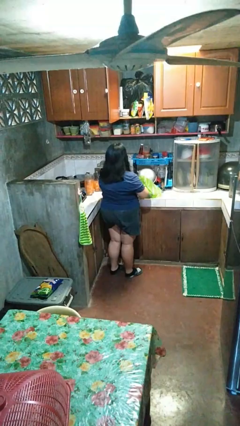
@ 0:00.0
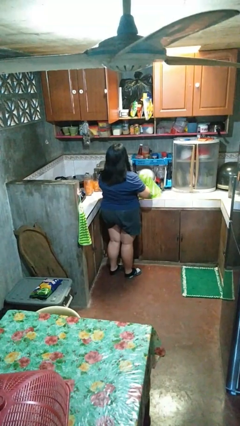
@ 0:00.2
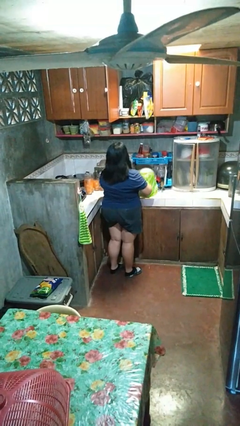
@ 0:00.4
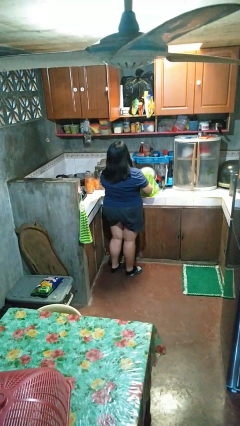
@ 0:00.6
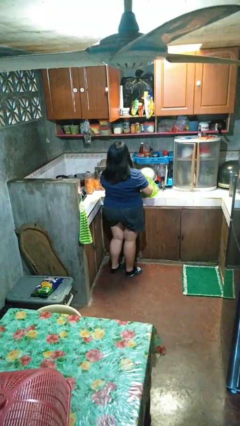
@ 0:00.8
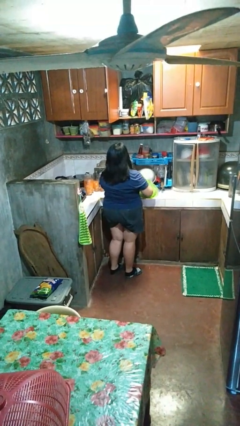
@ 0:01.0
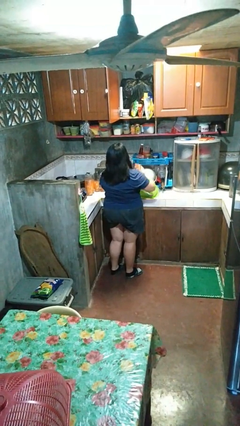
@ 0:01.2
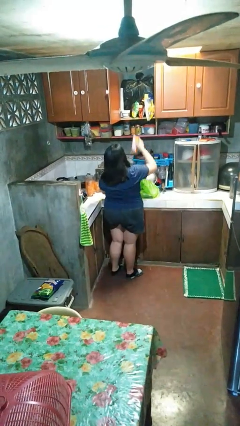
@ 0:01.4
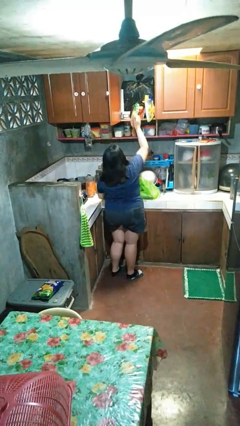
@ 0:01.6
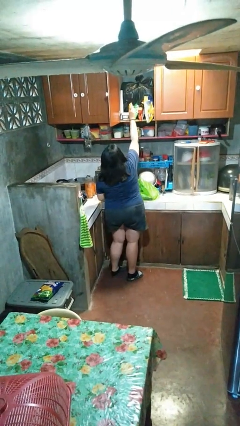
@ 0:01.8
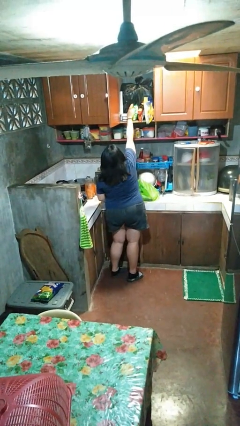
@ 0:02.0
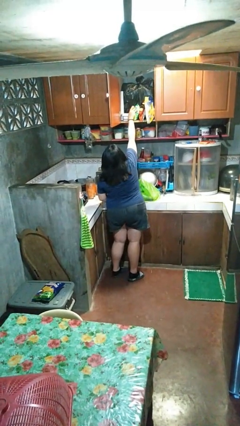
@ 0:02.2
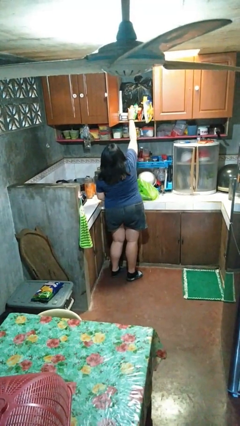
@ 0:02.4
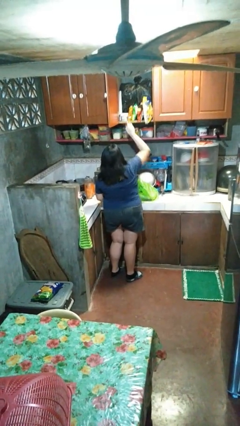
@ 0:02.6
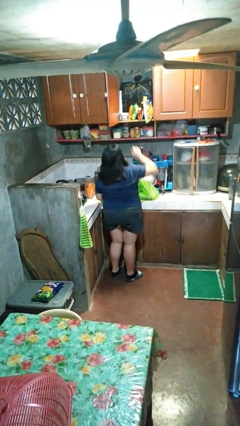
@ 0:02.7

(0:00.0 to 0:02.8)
person loads groceries into cabinet

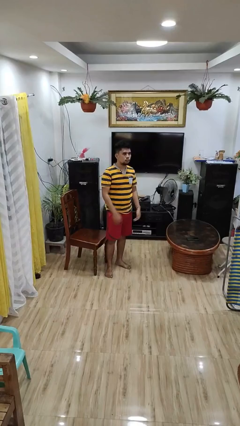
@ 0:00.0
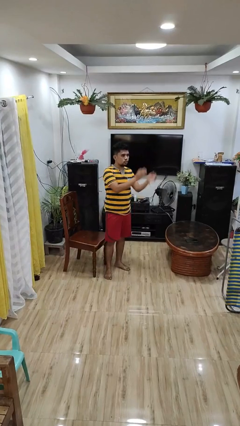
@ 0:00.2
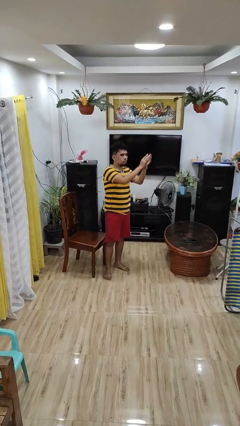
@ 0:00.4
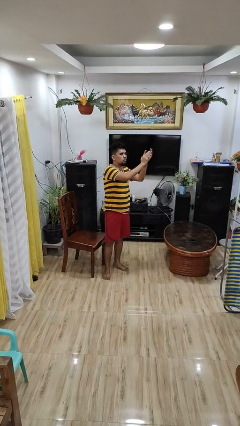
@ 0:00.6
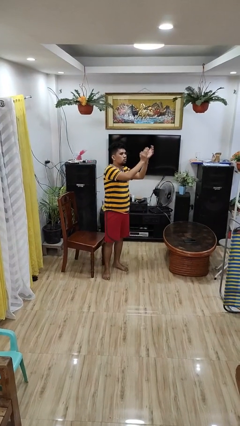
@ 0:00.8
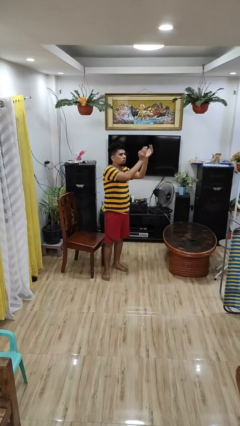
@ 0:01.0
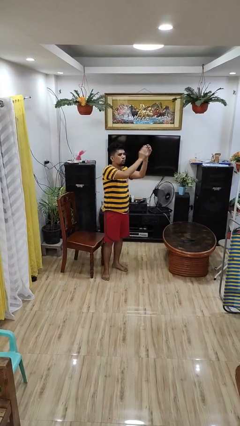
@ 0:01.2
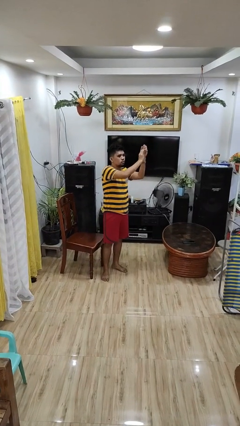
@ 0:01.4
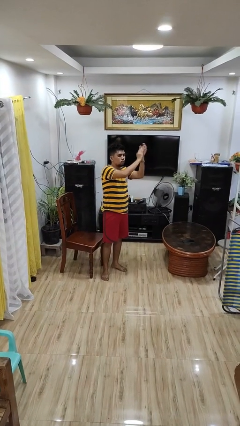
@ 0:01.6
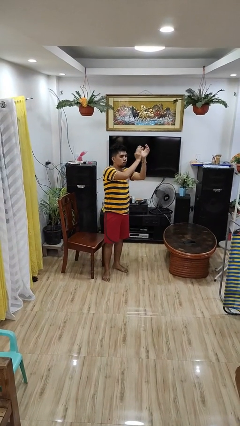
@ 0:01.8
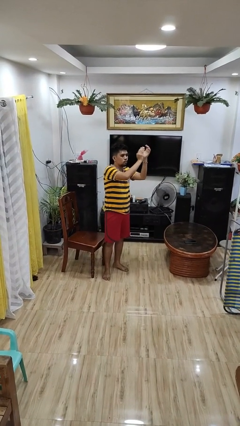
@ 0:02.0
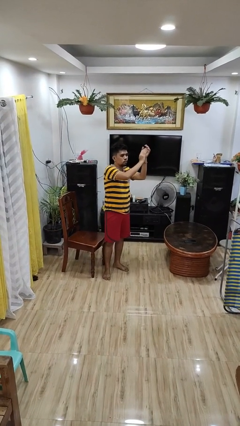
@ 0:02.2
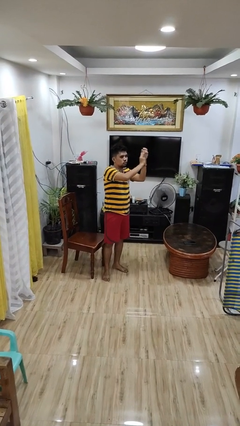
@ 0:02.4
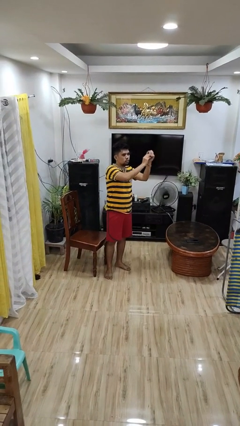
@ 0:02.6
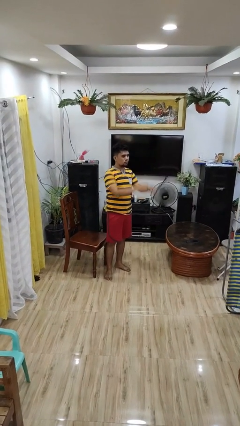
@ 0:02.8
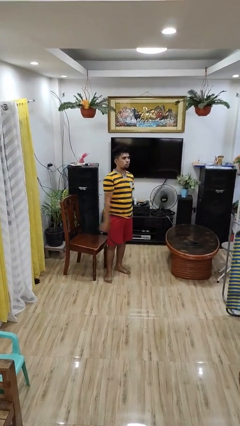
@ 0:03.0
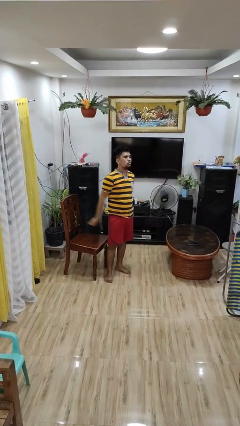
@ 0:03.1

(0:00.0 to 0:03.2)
person claps hands

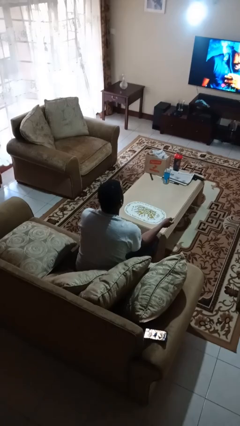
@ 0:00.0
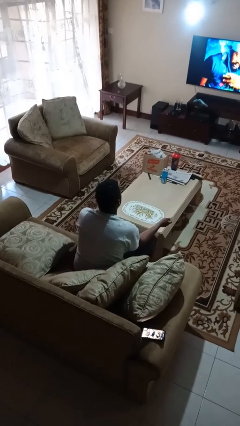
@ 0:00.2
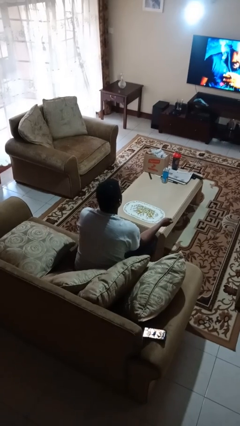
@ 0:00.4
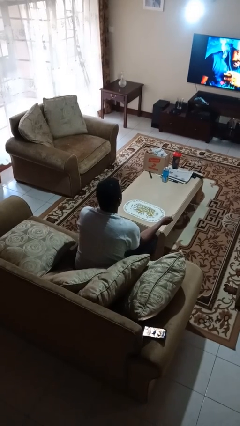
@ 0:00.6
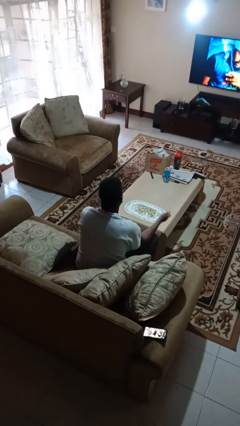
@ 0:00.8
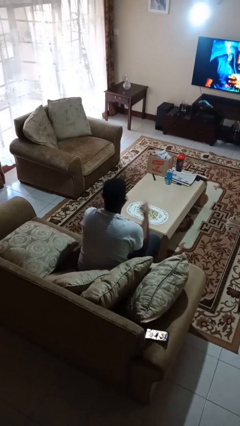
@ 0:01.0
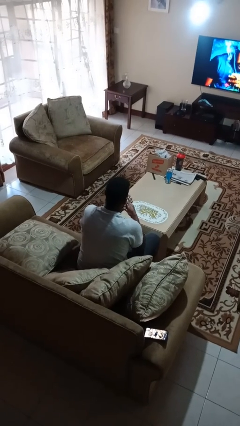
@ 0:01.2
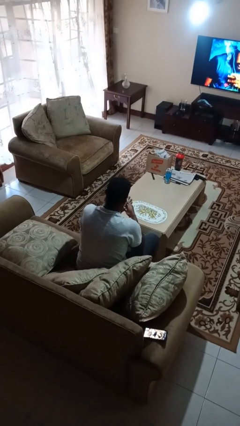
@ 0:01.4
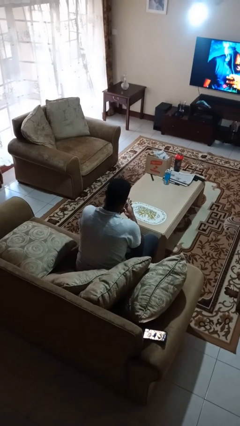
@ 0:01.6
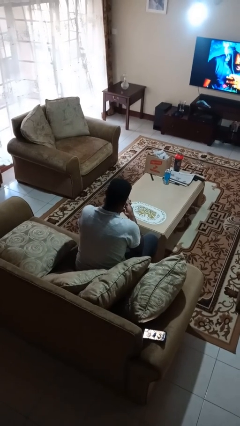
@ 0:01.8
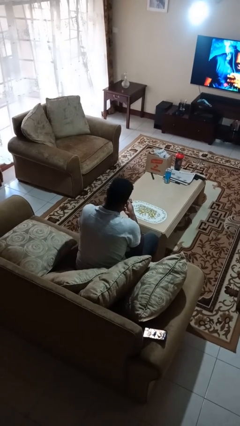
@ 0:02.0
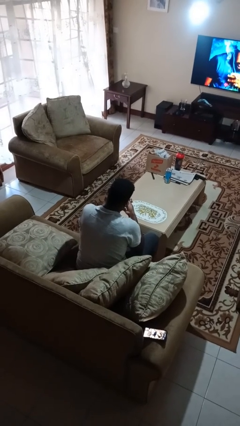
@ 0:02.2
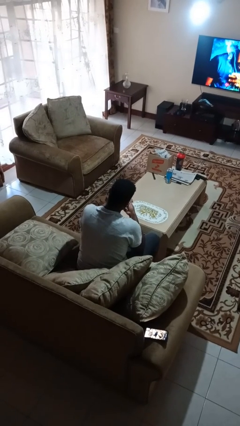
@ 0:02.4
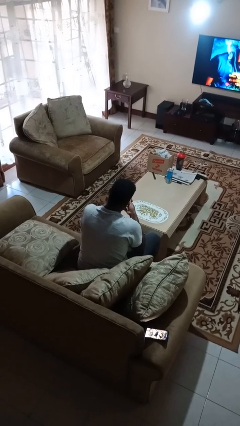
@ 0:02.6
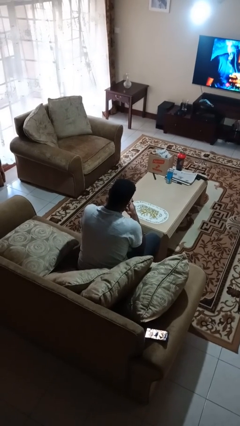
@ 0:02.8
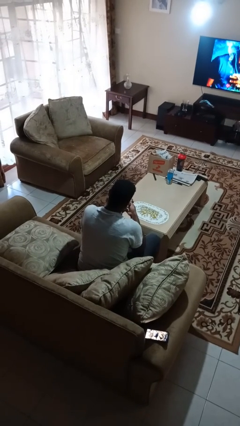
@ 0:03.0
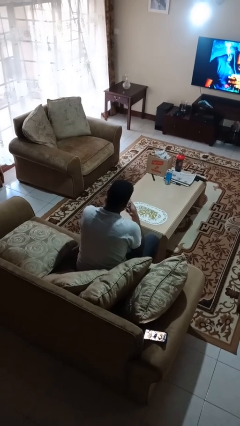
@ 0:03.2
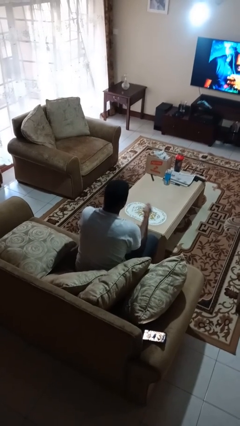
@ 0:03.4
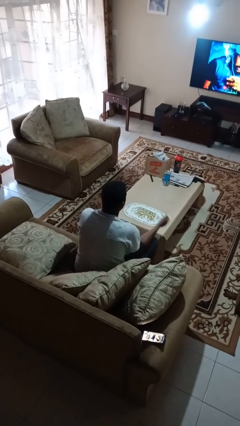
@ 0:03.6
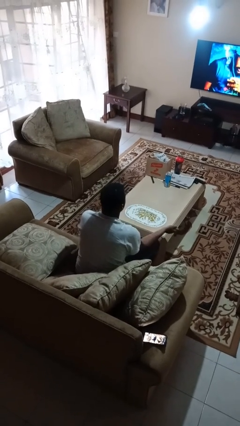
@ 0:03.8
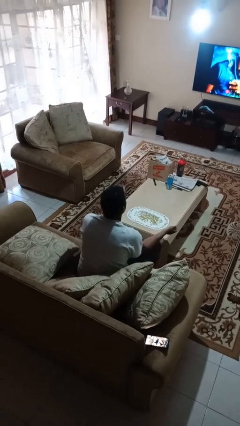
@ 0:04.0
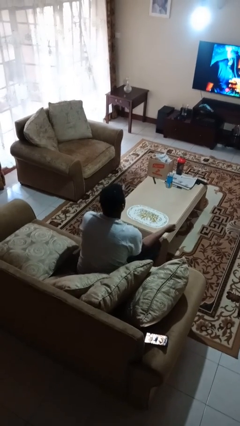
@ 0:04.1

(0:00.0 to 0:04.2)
person clips fingernails

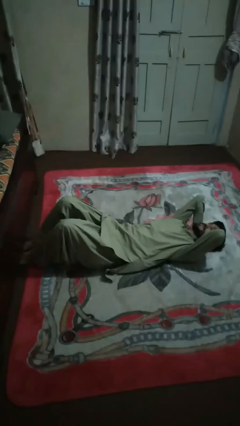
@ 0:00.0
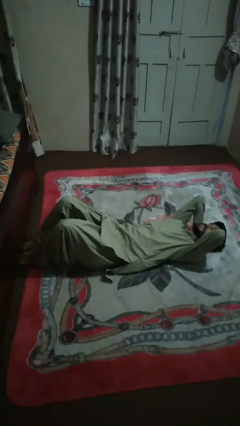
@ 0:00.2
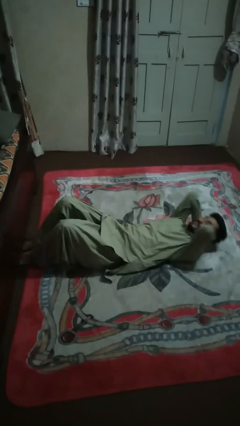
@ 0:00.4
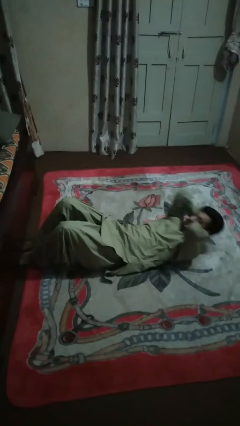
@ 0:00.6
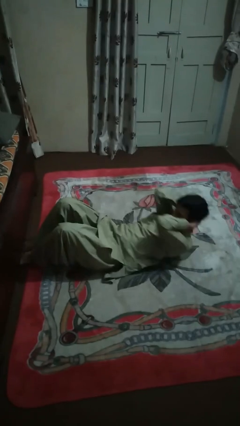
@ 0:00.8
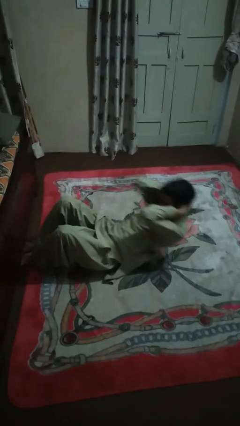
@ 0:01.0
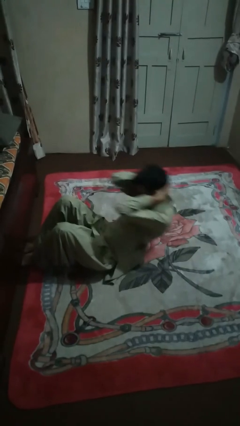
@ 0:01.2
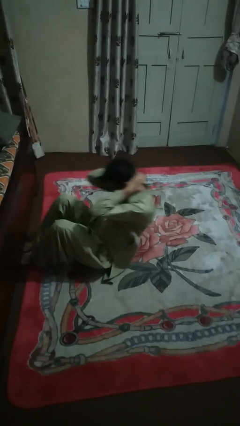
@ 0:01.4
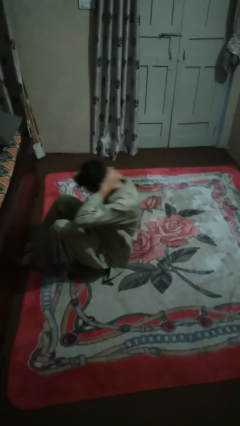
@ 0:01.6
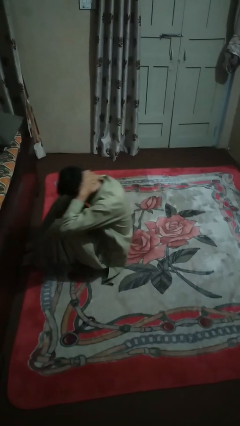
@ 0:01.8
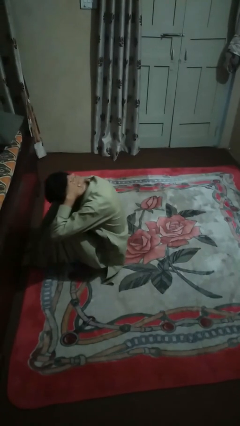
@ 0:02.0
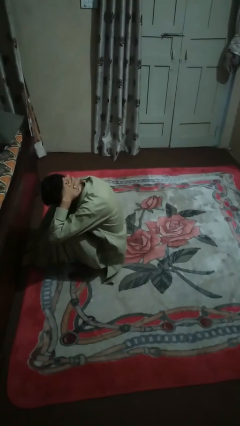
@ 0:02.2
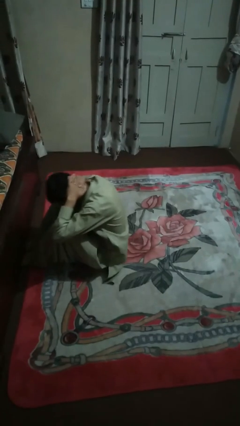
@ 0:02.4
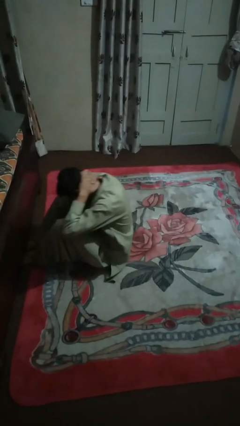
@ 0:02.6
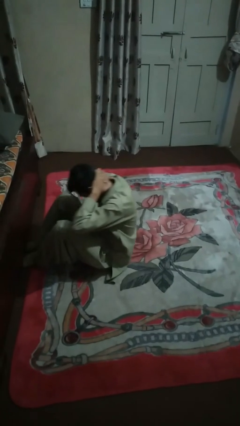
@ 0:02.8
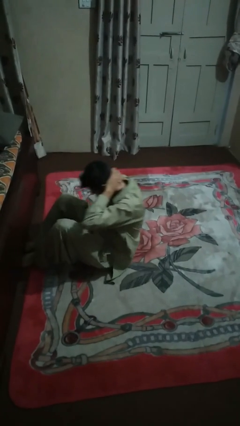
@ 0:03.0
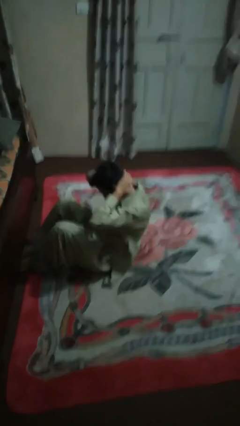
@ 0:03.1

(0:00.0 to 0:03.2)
person exercises with situp

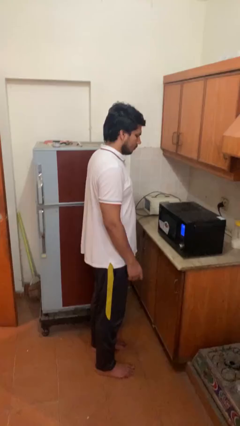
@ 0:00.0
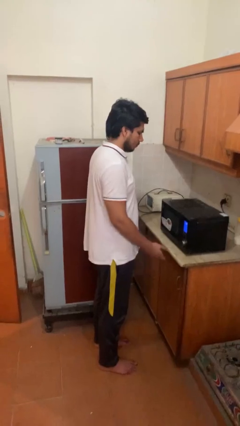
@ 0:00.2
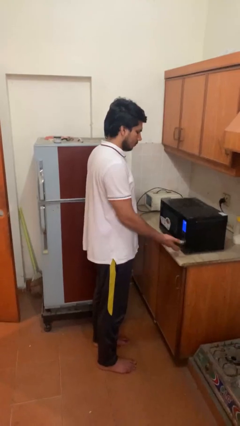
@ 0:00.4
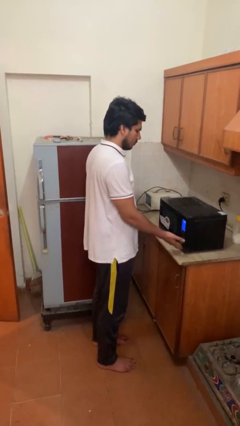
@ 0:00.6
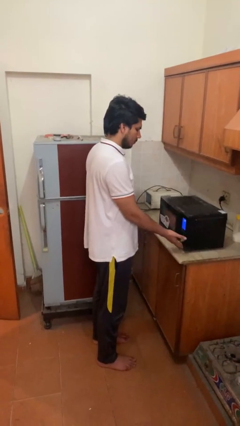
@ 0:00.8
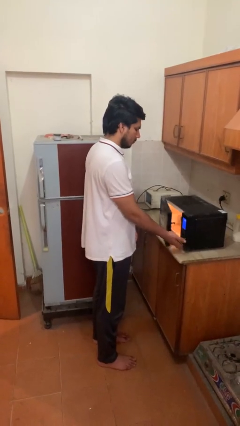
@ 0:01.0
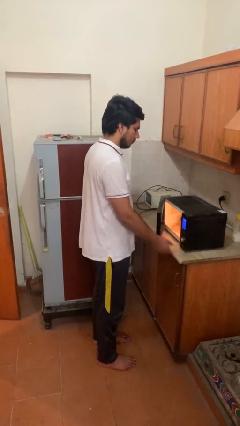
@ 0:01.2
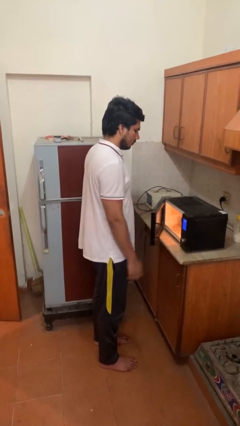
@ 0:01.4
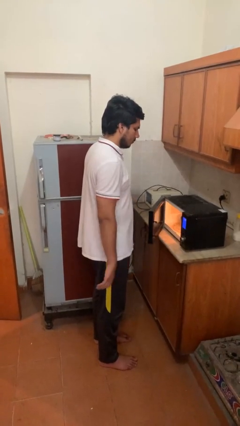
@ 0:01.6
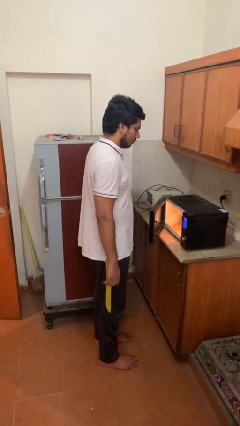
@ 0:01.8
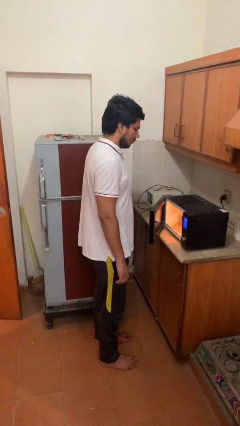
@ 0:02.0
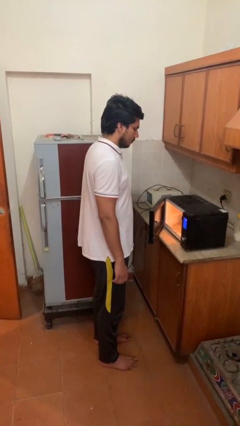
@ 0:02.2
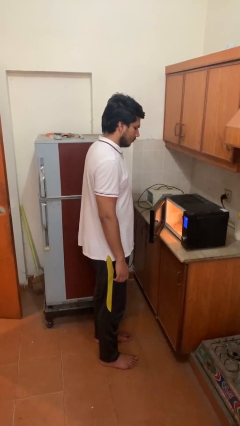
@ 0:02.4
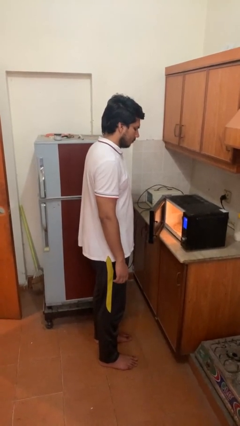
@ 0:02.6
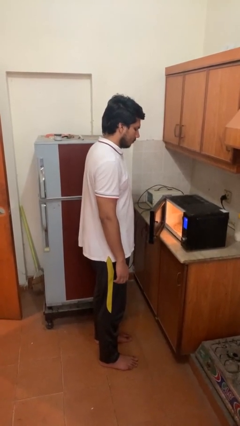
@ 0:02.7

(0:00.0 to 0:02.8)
person opens microwave

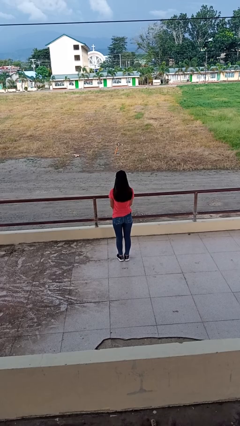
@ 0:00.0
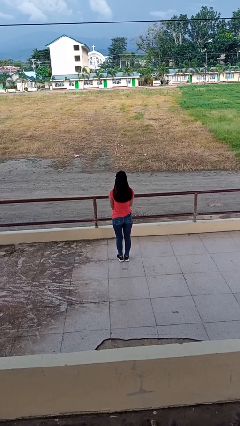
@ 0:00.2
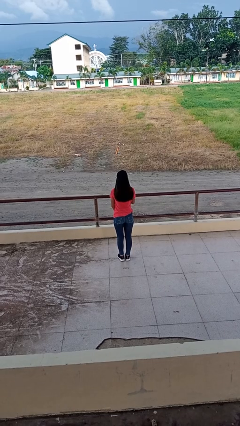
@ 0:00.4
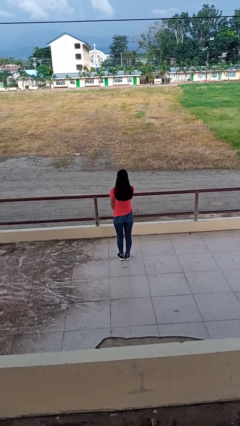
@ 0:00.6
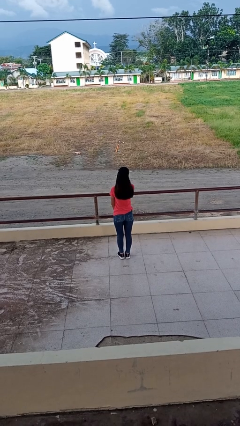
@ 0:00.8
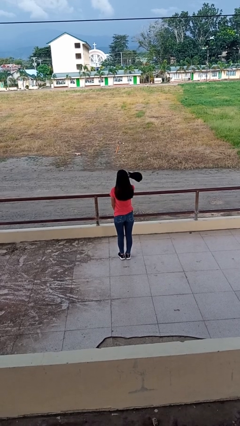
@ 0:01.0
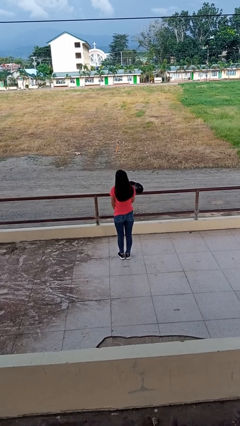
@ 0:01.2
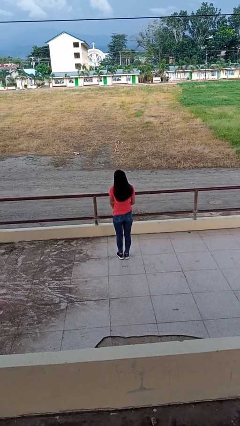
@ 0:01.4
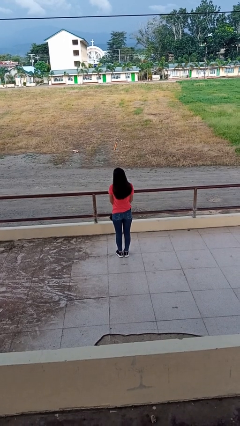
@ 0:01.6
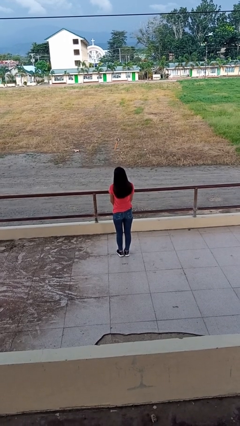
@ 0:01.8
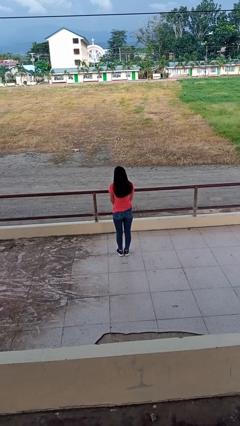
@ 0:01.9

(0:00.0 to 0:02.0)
person takes off hat
